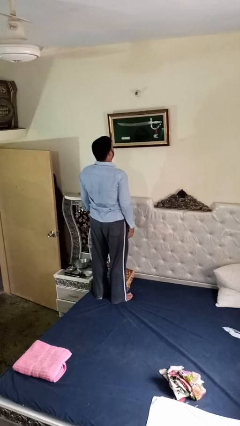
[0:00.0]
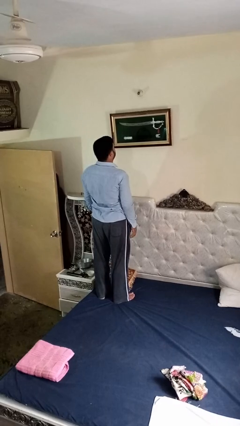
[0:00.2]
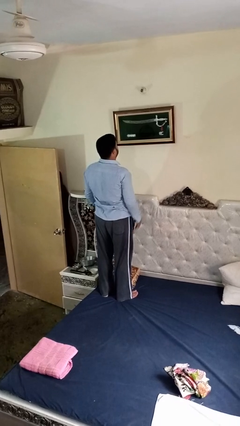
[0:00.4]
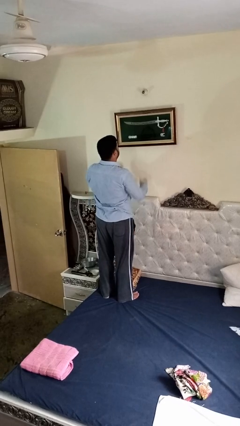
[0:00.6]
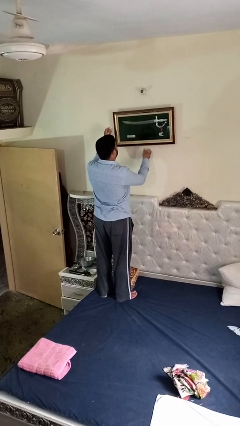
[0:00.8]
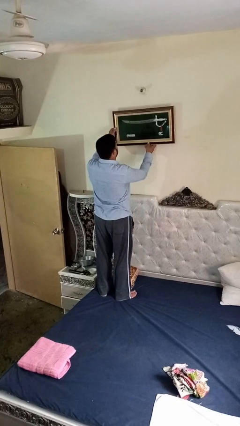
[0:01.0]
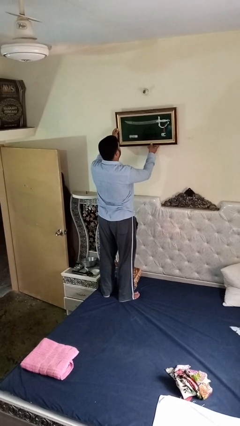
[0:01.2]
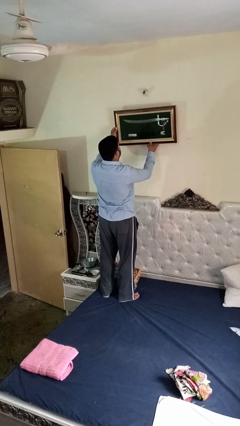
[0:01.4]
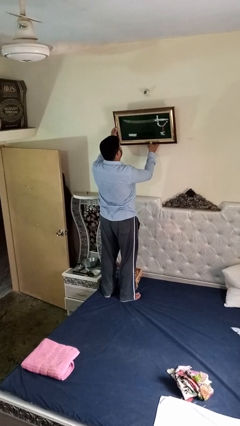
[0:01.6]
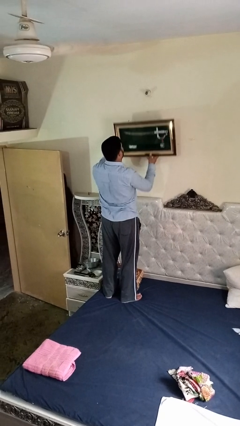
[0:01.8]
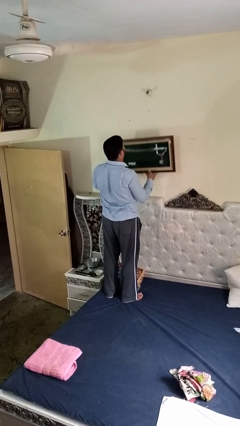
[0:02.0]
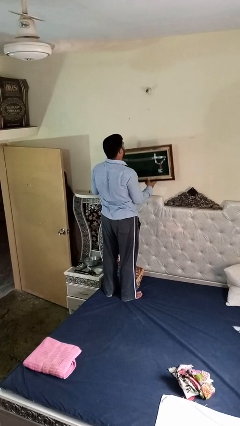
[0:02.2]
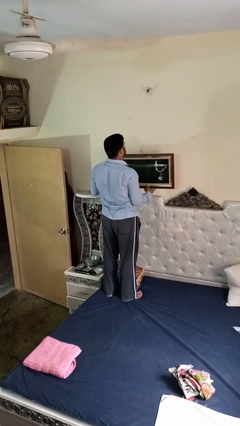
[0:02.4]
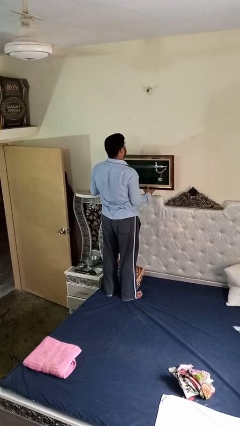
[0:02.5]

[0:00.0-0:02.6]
person takes down picture frame

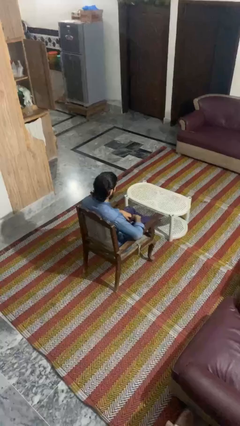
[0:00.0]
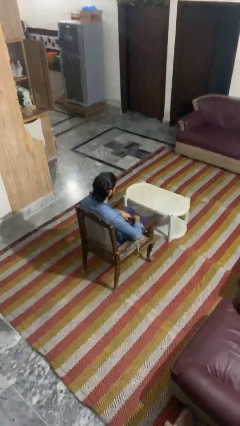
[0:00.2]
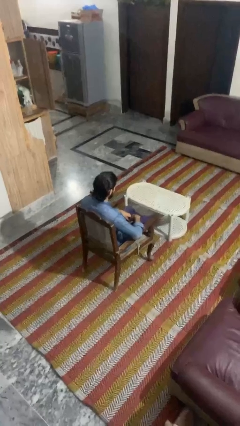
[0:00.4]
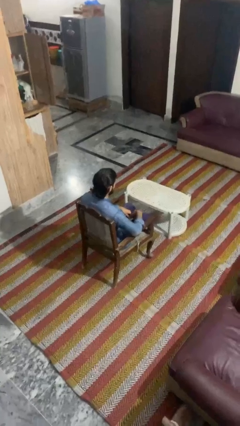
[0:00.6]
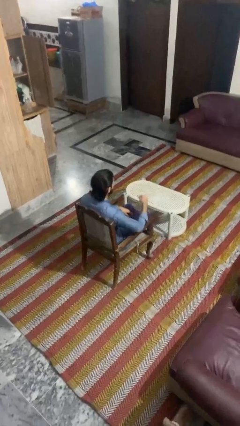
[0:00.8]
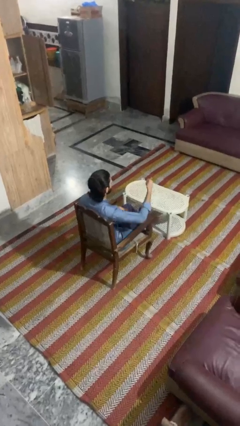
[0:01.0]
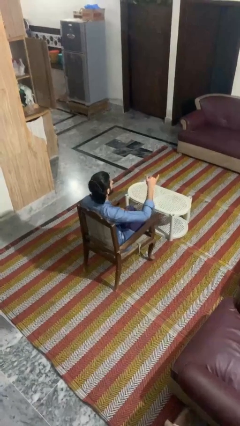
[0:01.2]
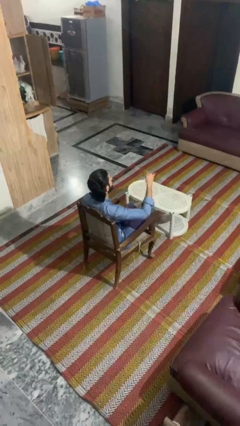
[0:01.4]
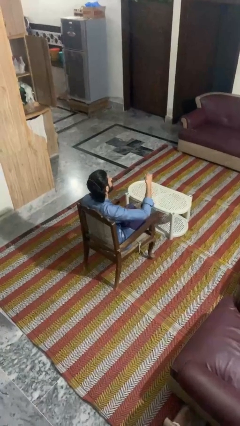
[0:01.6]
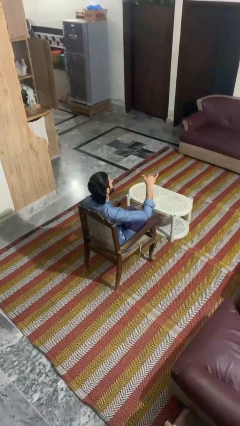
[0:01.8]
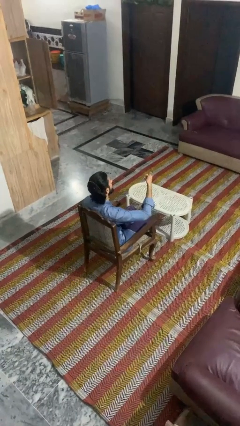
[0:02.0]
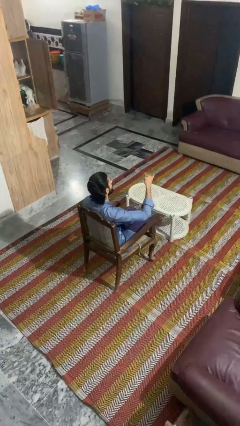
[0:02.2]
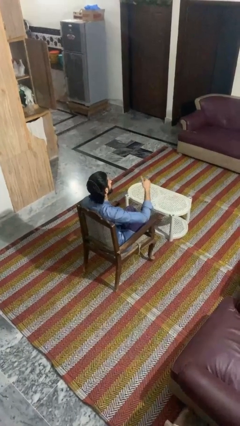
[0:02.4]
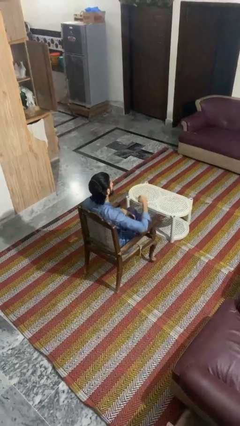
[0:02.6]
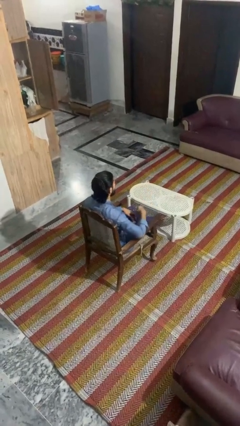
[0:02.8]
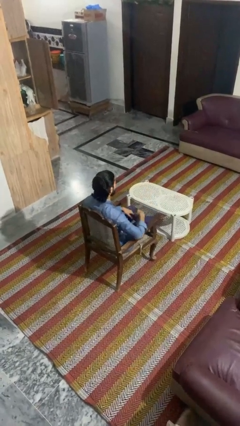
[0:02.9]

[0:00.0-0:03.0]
person gestures hang loose

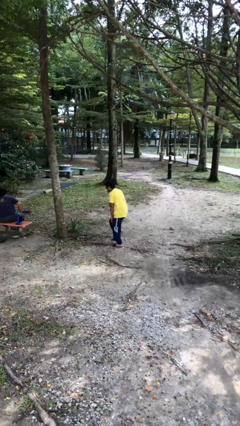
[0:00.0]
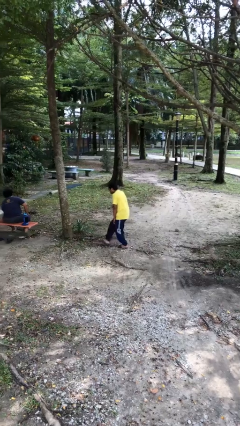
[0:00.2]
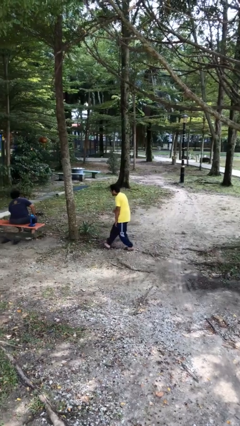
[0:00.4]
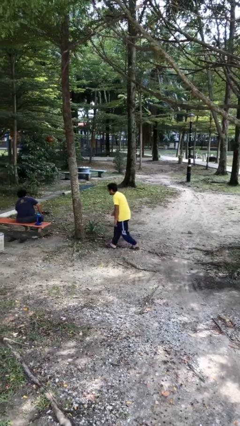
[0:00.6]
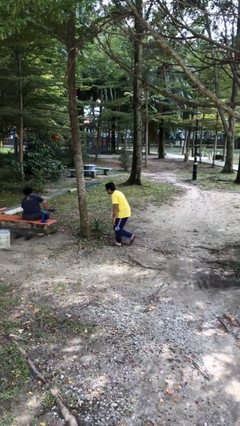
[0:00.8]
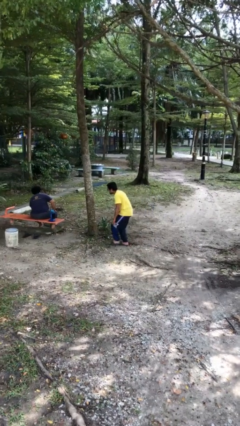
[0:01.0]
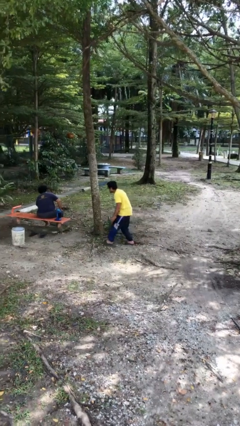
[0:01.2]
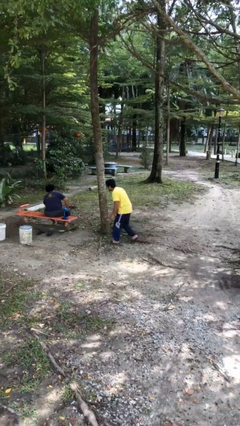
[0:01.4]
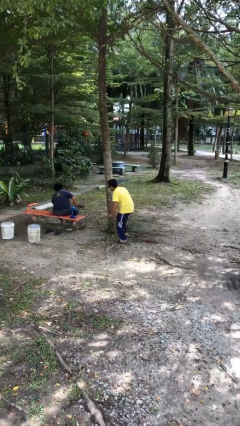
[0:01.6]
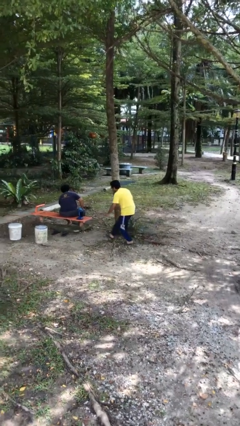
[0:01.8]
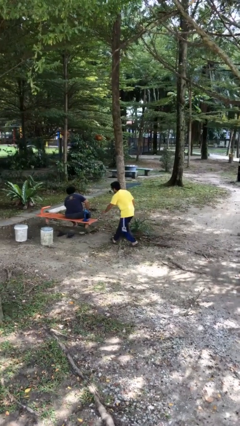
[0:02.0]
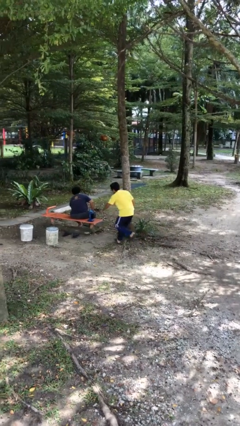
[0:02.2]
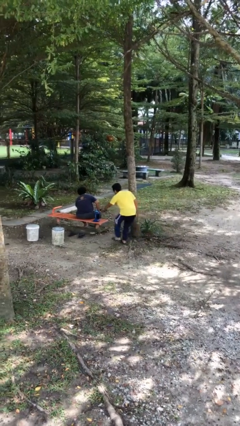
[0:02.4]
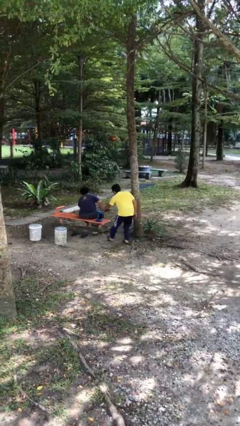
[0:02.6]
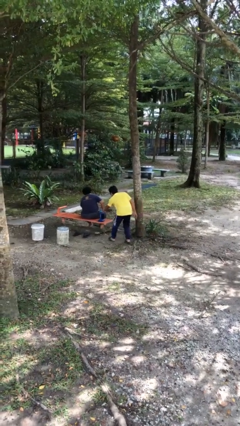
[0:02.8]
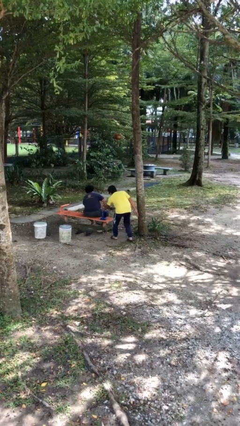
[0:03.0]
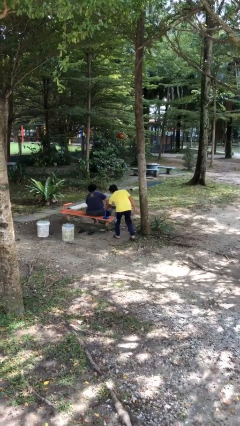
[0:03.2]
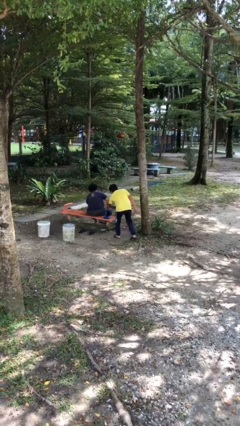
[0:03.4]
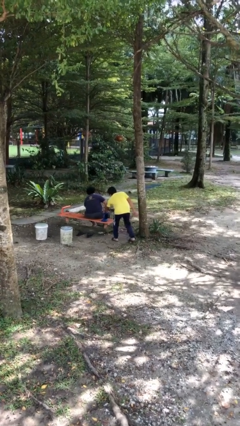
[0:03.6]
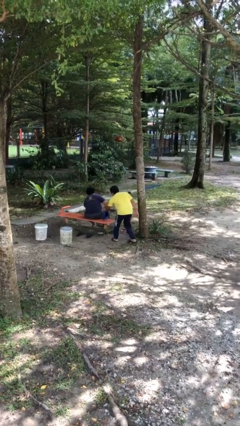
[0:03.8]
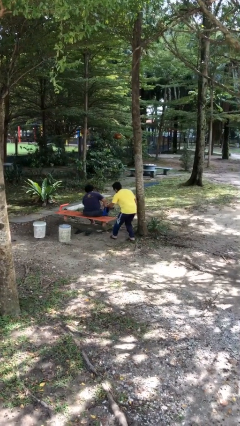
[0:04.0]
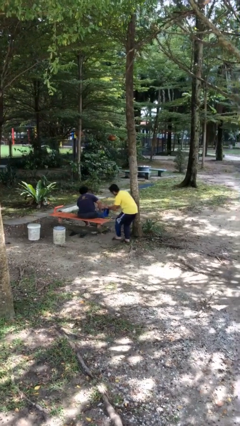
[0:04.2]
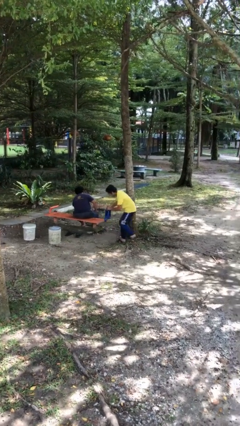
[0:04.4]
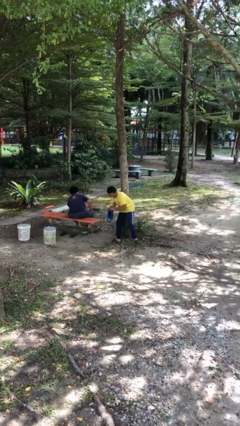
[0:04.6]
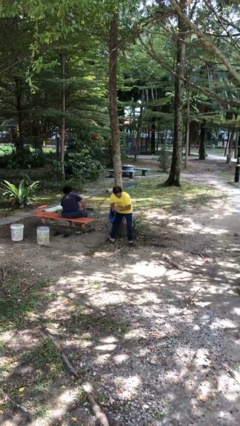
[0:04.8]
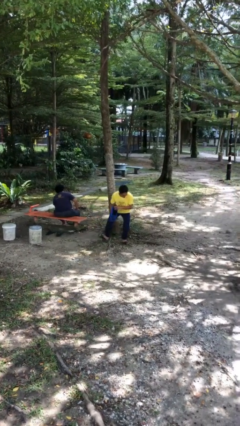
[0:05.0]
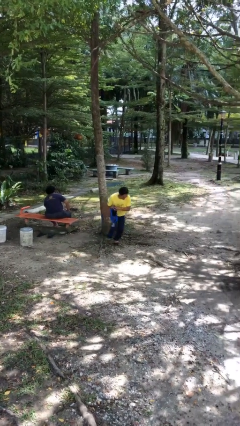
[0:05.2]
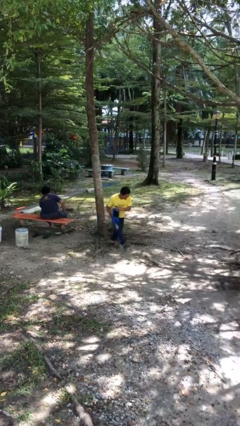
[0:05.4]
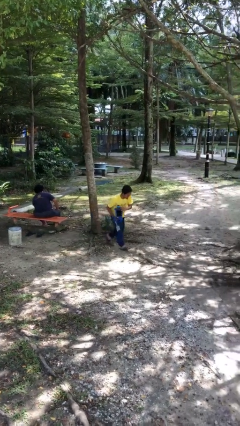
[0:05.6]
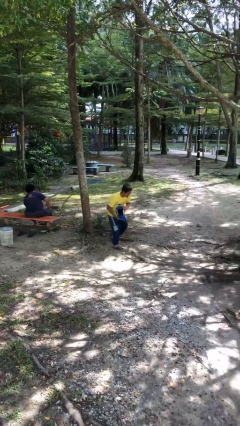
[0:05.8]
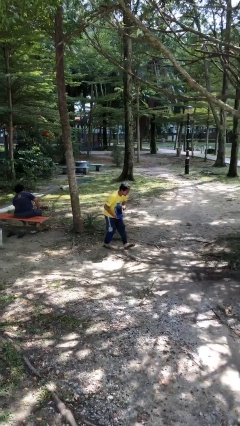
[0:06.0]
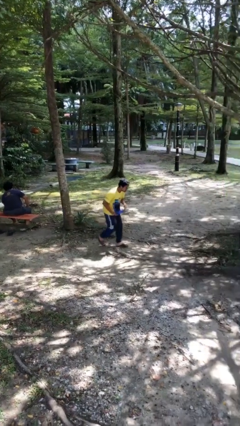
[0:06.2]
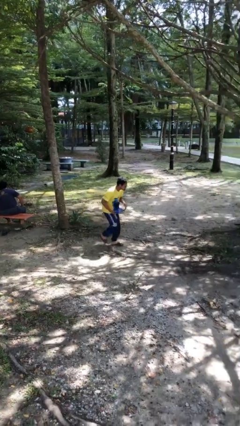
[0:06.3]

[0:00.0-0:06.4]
person steals object from person

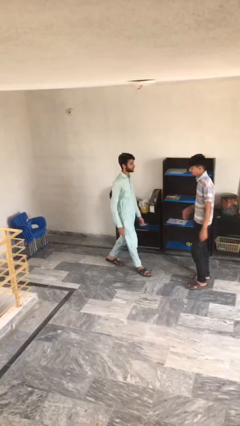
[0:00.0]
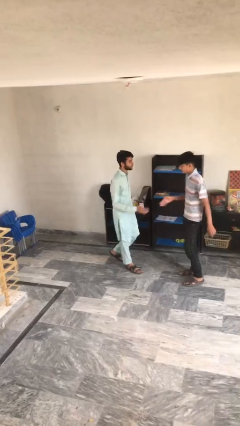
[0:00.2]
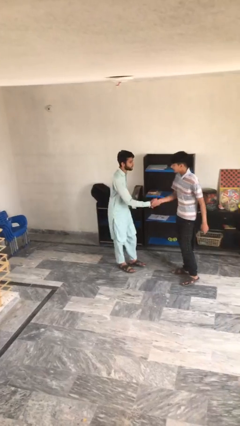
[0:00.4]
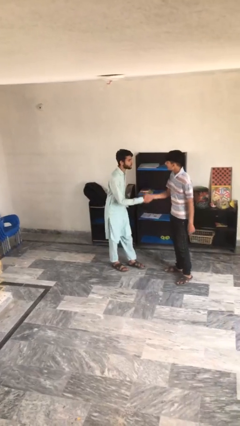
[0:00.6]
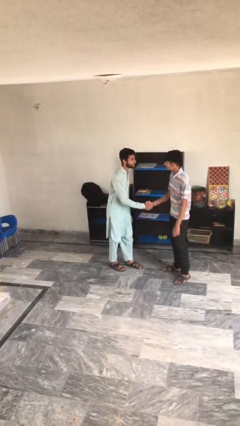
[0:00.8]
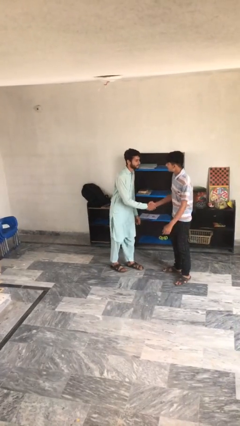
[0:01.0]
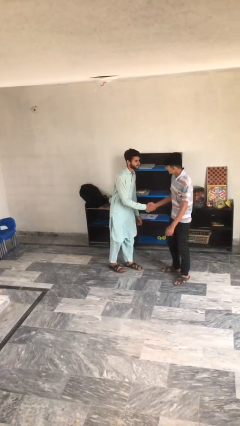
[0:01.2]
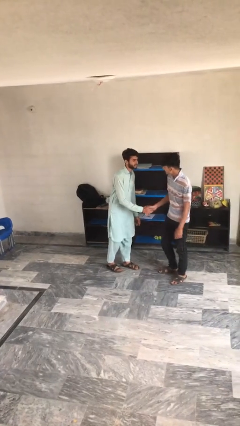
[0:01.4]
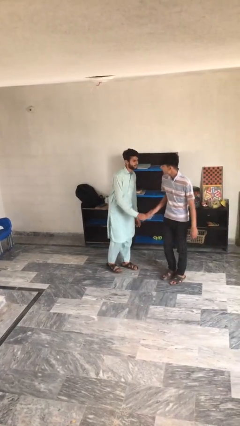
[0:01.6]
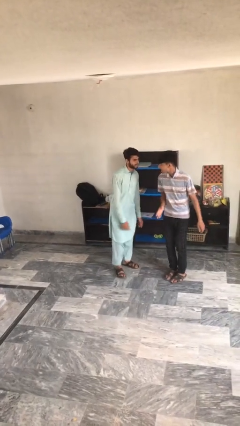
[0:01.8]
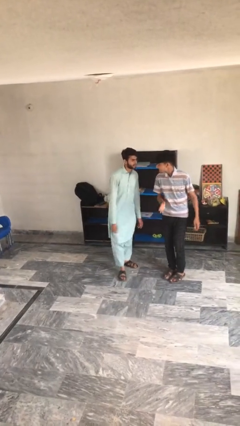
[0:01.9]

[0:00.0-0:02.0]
person shakes hand

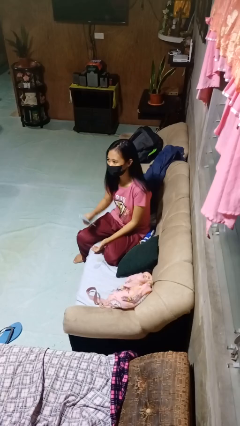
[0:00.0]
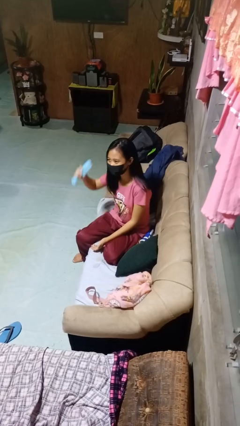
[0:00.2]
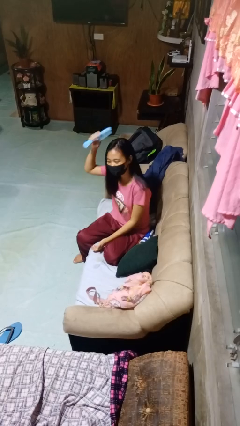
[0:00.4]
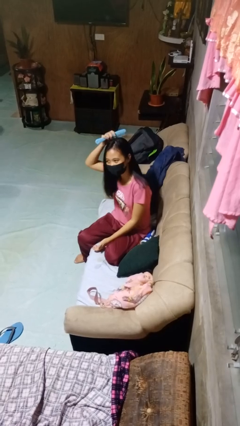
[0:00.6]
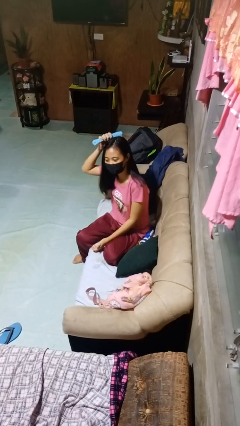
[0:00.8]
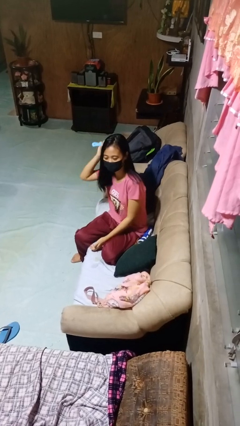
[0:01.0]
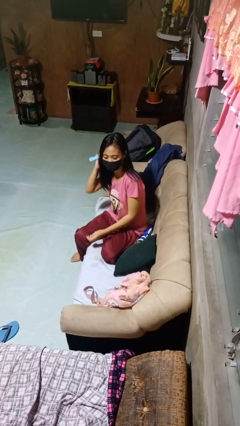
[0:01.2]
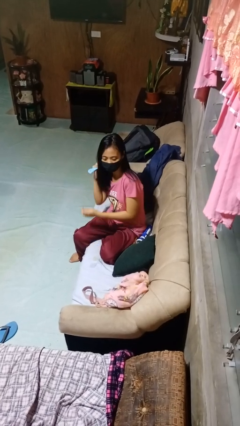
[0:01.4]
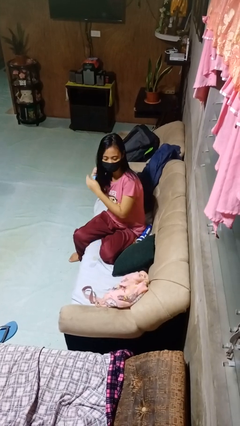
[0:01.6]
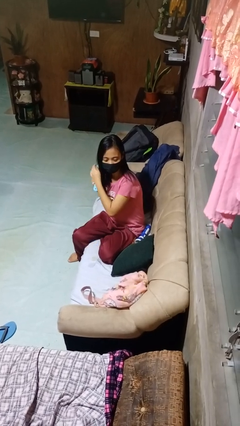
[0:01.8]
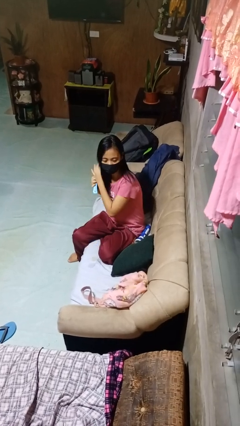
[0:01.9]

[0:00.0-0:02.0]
person brushes hair

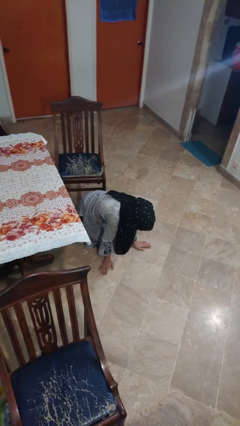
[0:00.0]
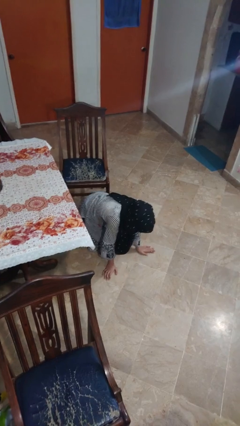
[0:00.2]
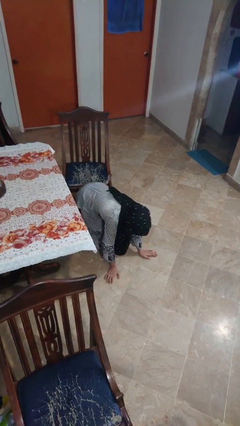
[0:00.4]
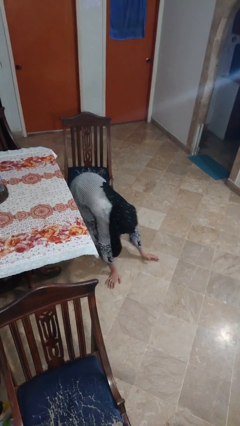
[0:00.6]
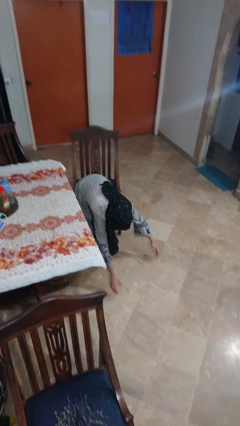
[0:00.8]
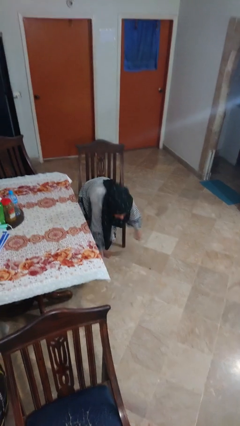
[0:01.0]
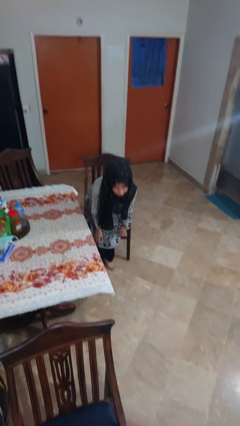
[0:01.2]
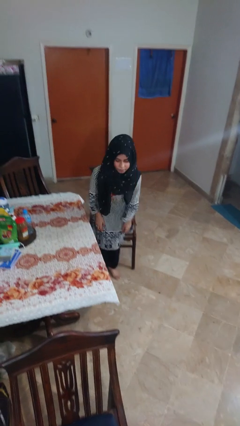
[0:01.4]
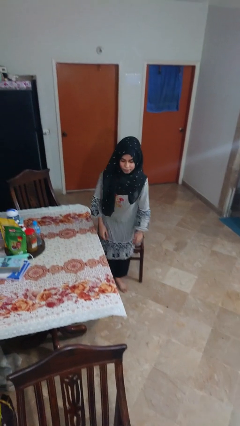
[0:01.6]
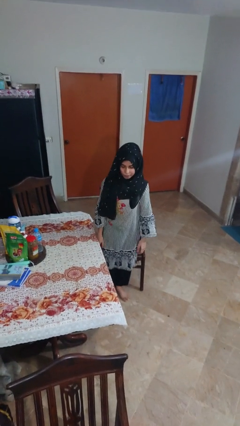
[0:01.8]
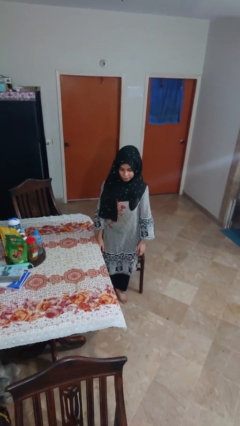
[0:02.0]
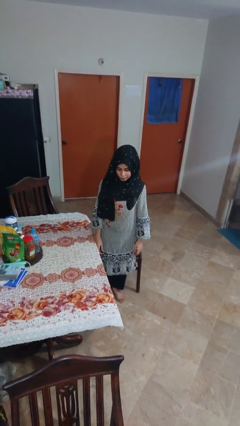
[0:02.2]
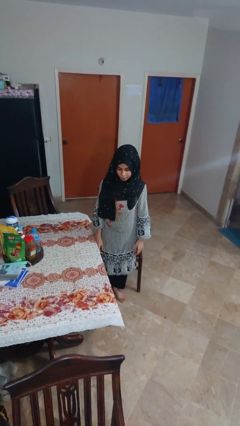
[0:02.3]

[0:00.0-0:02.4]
person stands up from floor
